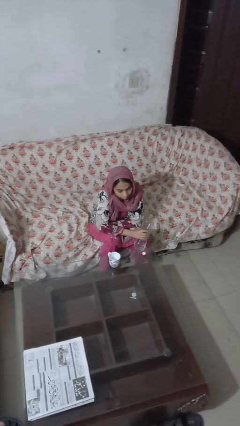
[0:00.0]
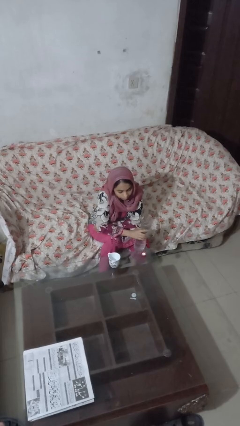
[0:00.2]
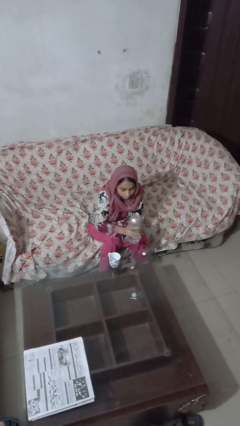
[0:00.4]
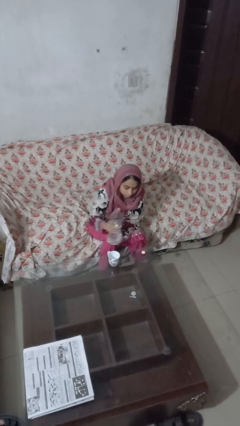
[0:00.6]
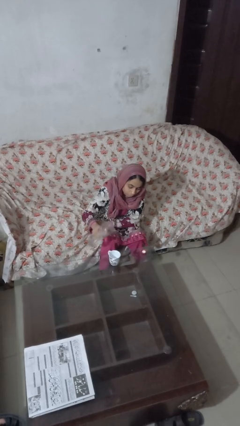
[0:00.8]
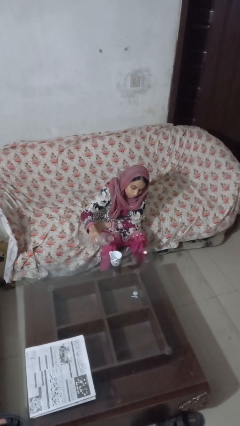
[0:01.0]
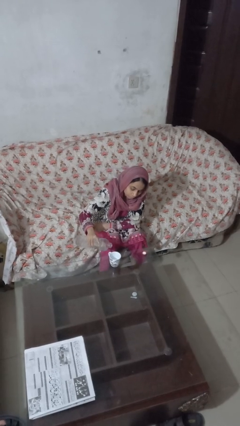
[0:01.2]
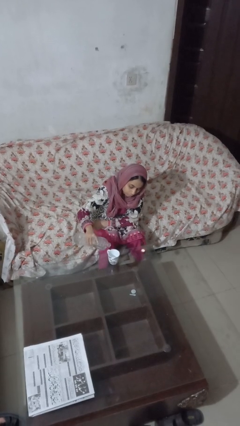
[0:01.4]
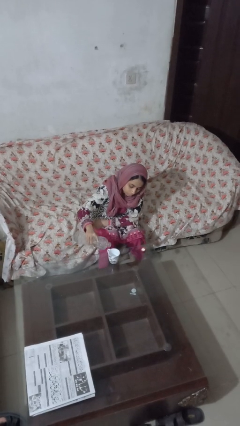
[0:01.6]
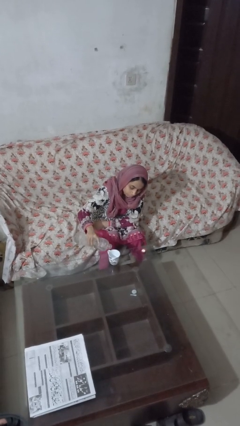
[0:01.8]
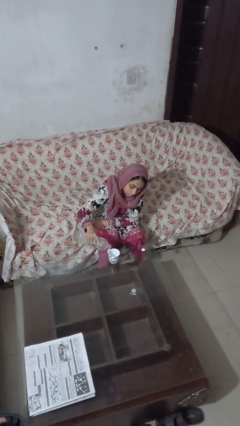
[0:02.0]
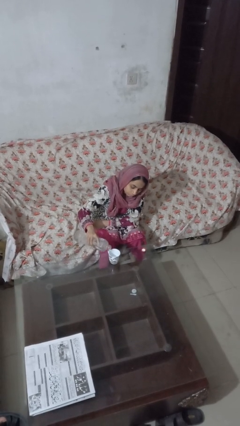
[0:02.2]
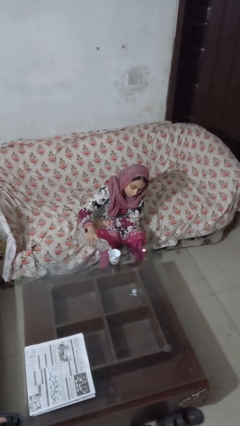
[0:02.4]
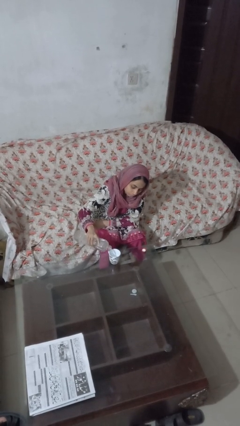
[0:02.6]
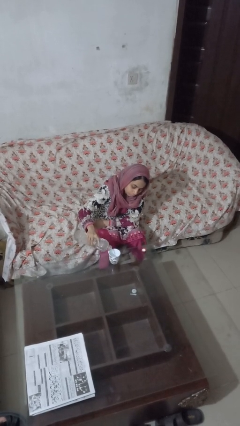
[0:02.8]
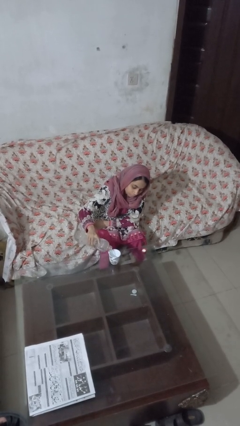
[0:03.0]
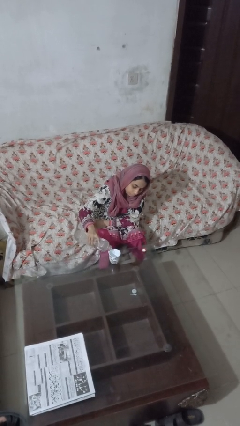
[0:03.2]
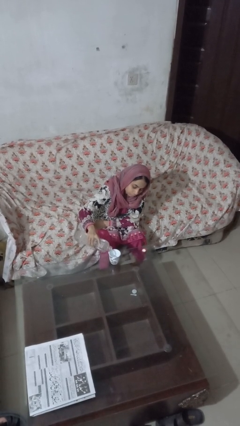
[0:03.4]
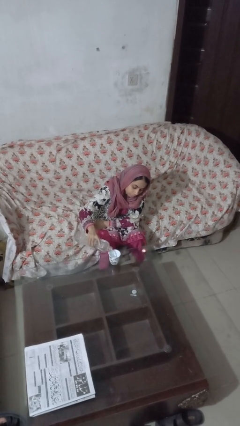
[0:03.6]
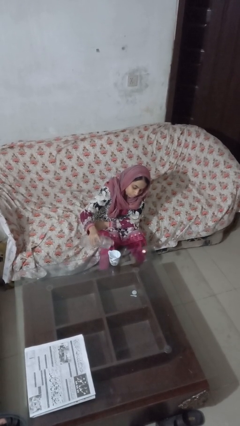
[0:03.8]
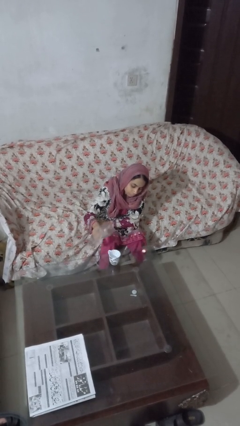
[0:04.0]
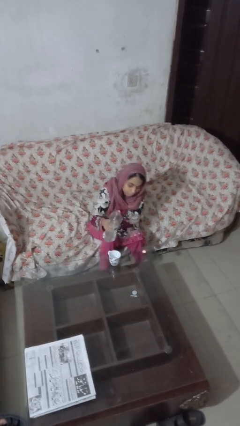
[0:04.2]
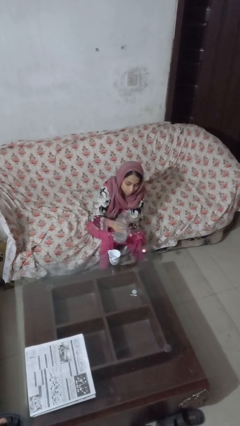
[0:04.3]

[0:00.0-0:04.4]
person pours liquid into cup

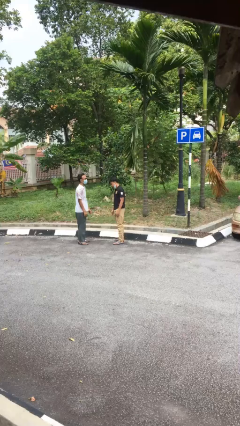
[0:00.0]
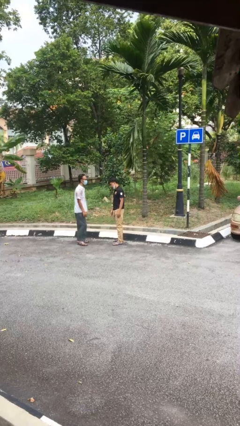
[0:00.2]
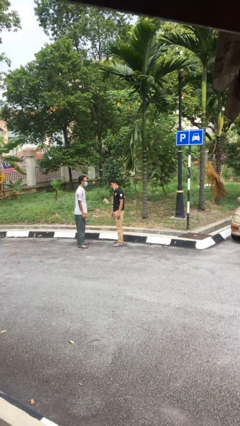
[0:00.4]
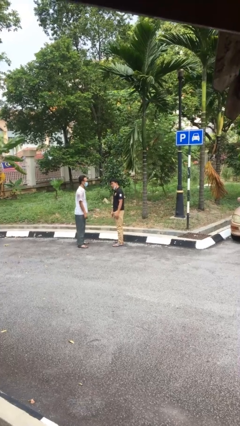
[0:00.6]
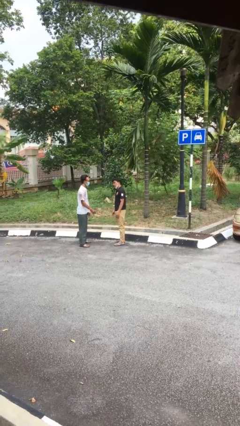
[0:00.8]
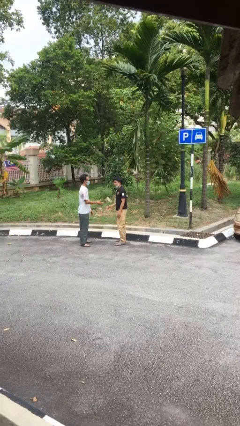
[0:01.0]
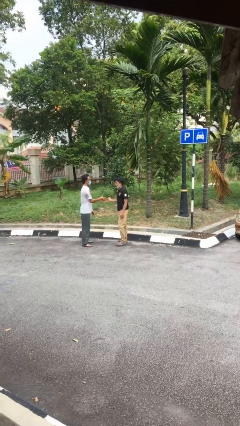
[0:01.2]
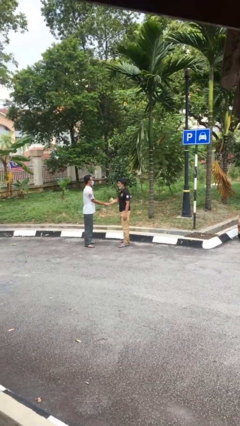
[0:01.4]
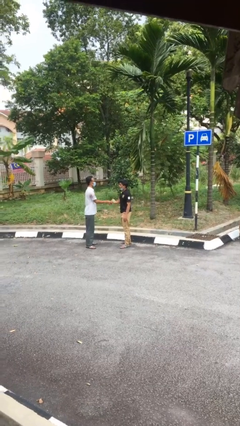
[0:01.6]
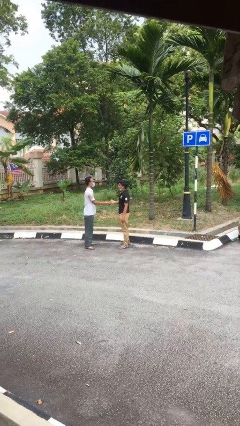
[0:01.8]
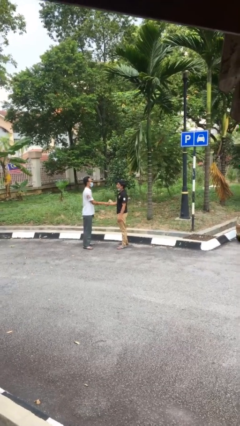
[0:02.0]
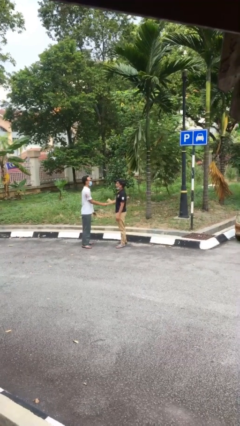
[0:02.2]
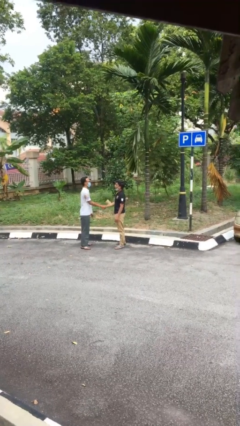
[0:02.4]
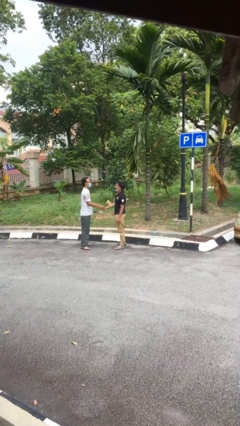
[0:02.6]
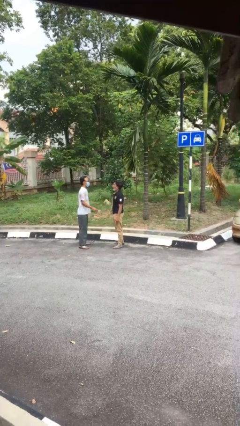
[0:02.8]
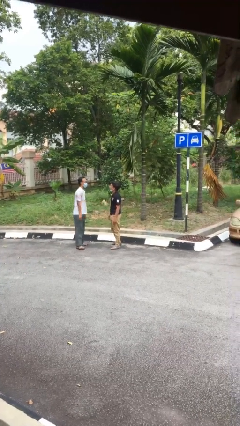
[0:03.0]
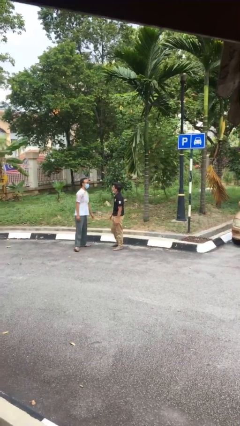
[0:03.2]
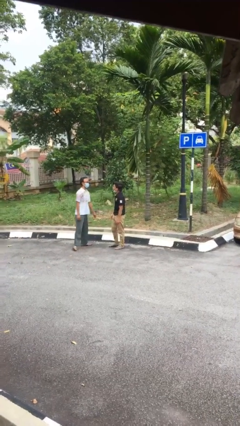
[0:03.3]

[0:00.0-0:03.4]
person shakes hand

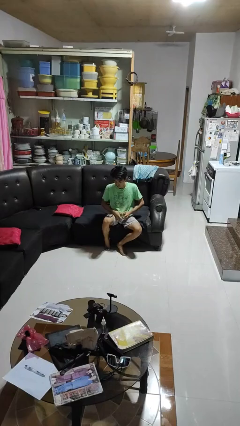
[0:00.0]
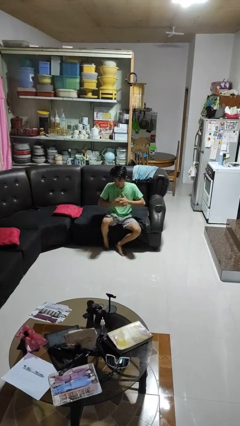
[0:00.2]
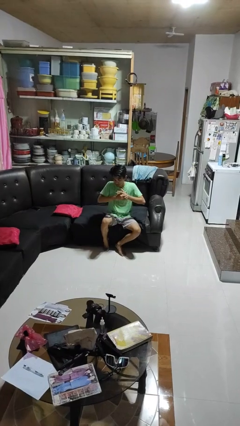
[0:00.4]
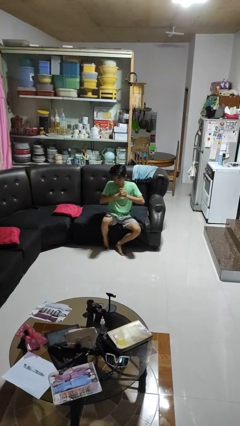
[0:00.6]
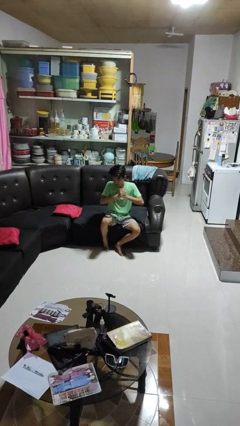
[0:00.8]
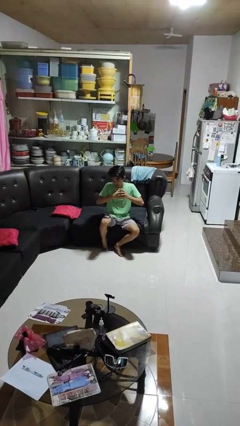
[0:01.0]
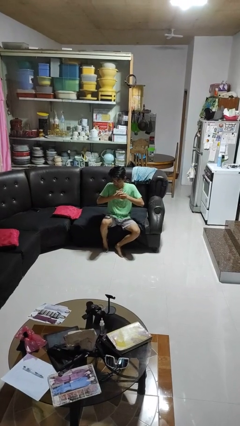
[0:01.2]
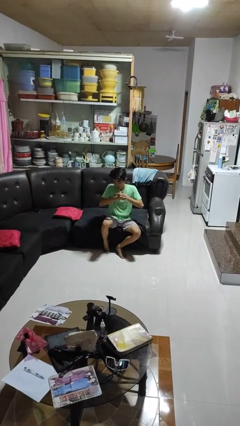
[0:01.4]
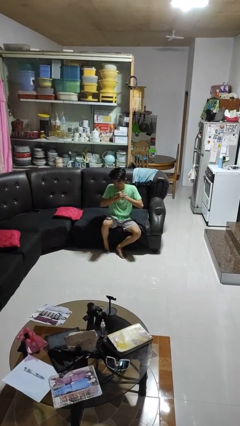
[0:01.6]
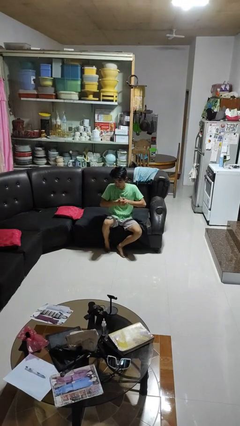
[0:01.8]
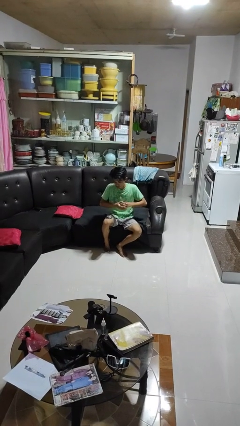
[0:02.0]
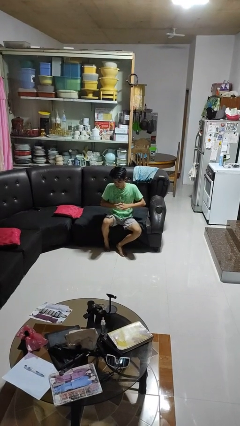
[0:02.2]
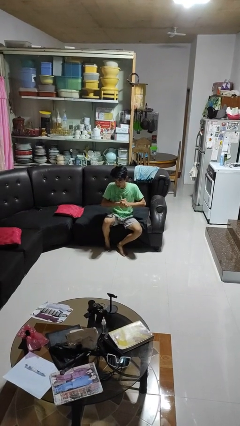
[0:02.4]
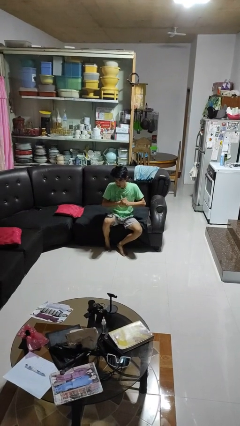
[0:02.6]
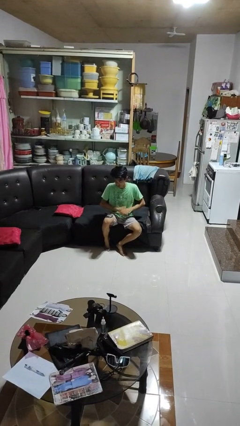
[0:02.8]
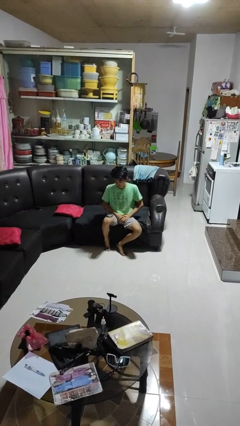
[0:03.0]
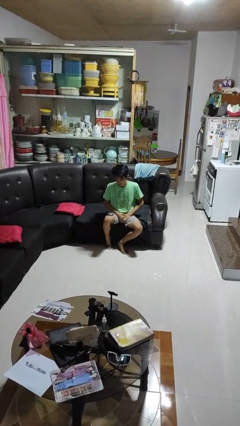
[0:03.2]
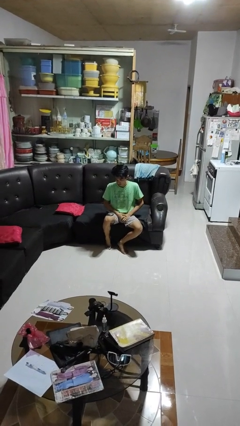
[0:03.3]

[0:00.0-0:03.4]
person cracks knuckles

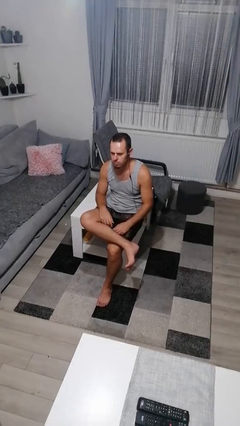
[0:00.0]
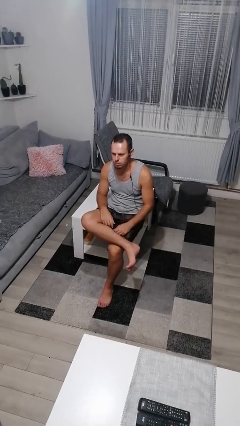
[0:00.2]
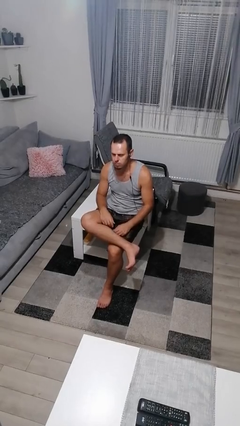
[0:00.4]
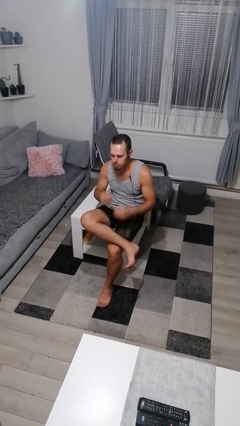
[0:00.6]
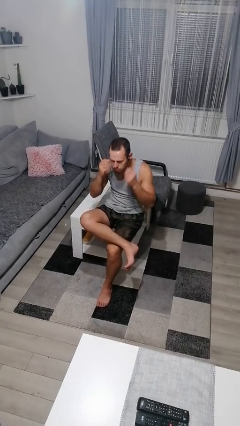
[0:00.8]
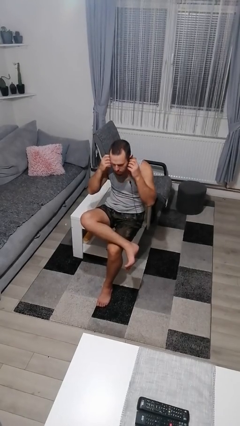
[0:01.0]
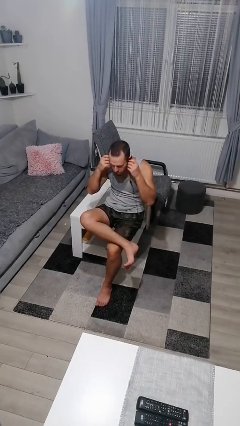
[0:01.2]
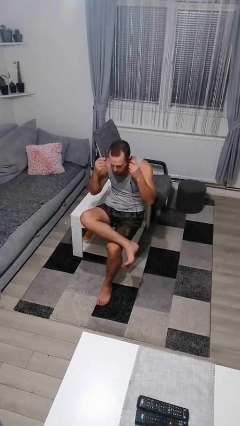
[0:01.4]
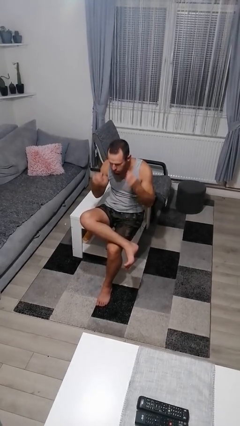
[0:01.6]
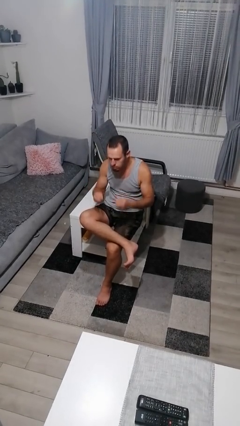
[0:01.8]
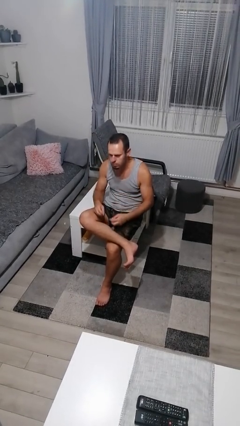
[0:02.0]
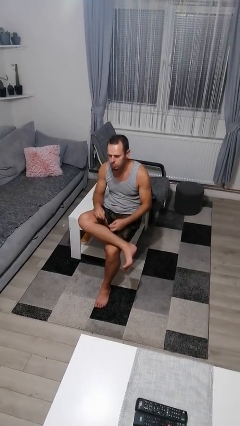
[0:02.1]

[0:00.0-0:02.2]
person takes off headphones

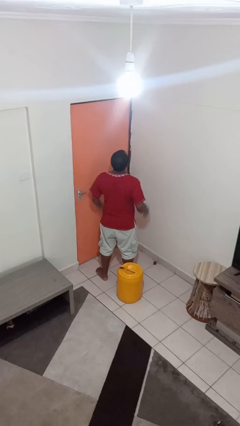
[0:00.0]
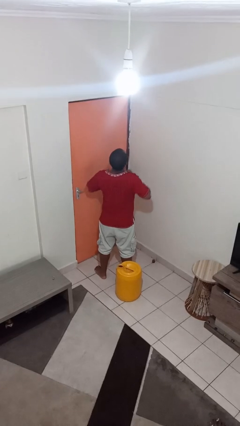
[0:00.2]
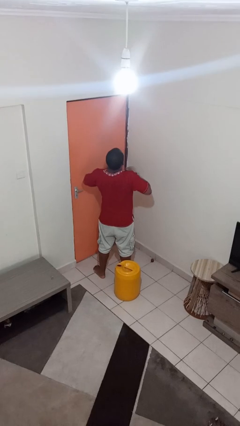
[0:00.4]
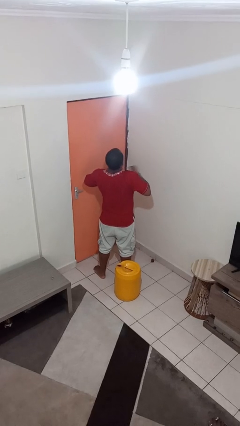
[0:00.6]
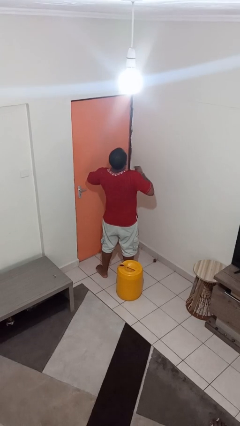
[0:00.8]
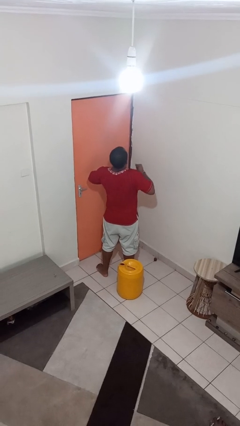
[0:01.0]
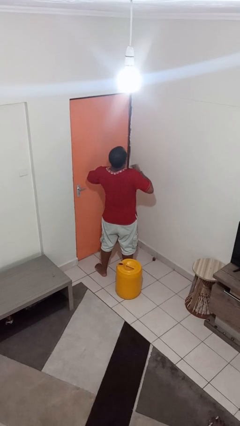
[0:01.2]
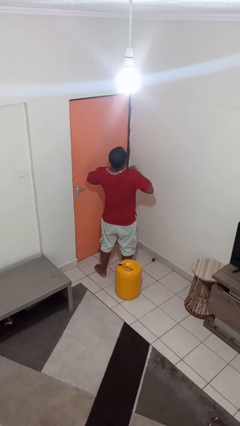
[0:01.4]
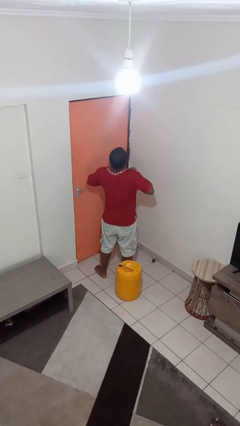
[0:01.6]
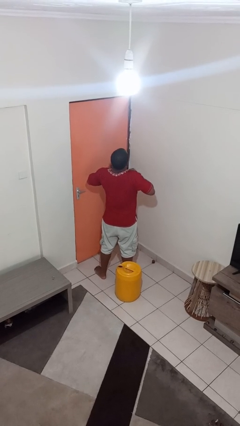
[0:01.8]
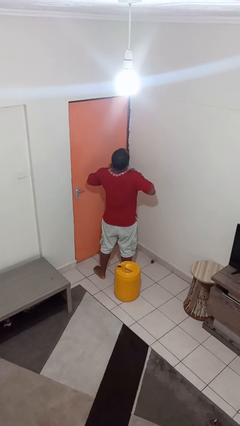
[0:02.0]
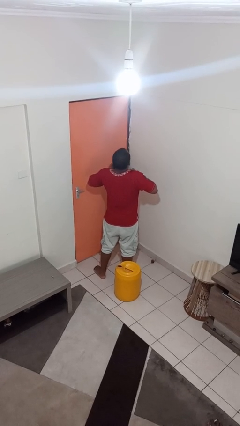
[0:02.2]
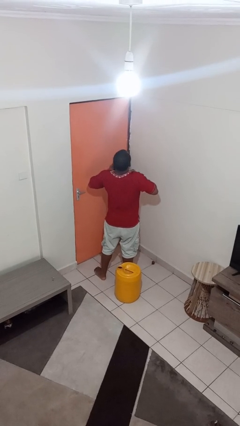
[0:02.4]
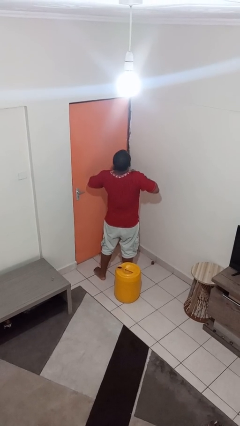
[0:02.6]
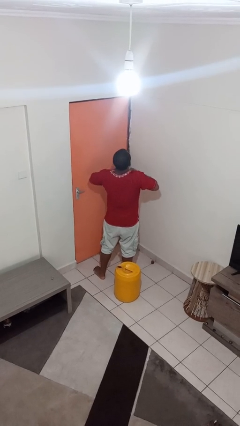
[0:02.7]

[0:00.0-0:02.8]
person drums on chest

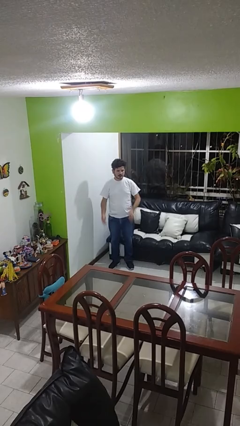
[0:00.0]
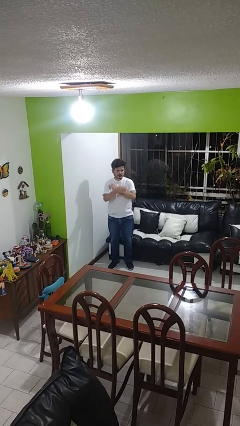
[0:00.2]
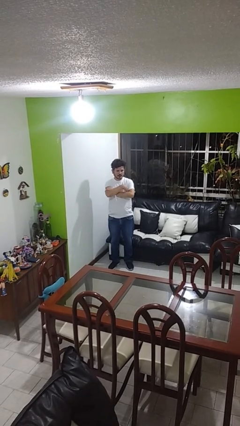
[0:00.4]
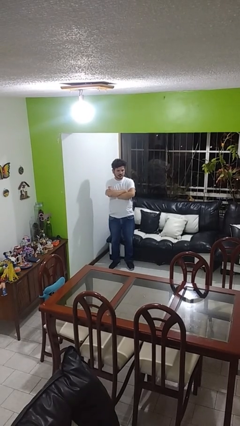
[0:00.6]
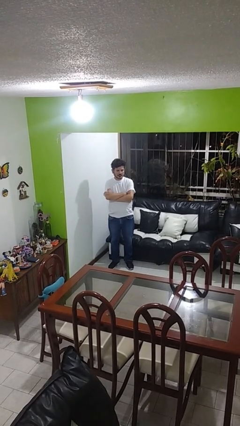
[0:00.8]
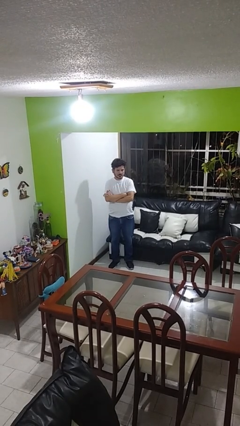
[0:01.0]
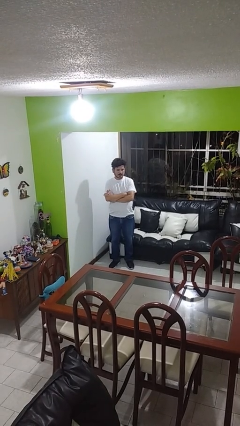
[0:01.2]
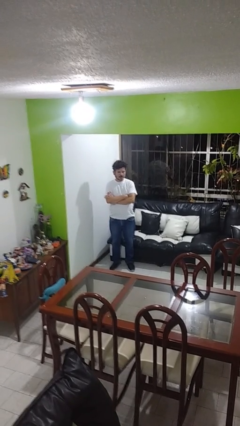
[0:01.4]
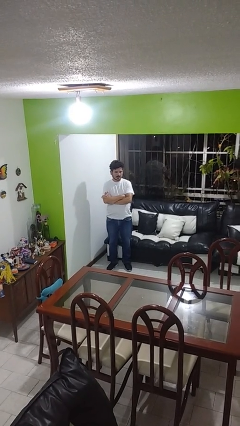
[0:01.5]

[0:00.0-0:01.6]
person crosses arms
